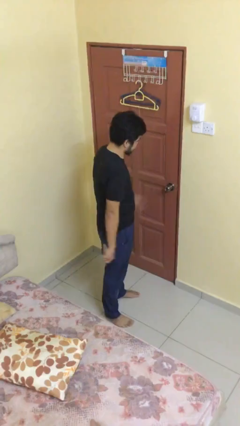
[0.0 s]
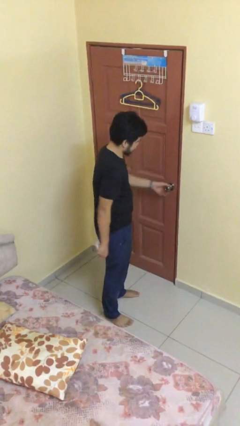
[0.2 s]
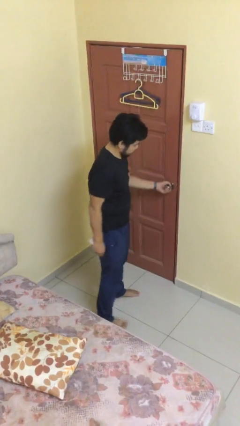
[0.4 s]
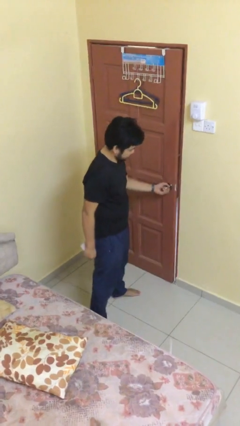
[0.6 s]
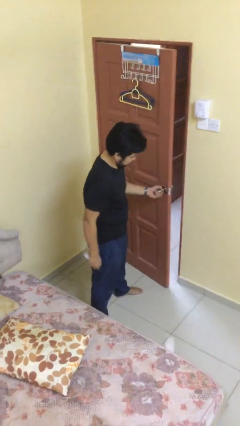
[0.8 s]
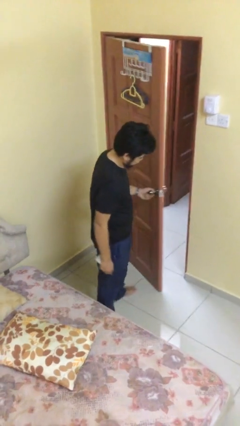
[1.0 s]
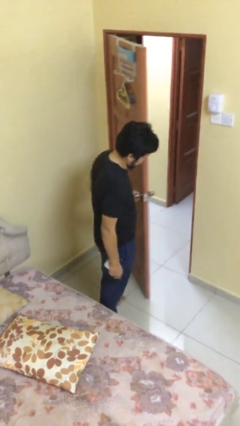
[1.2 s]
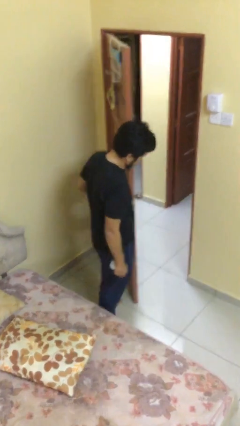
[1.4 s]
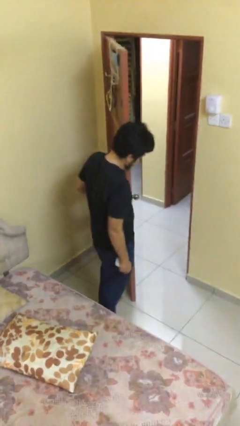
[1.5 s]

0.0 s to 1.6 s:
person opens facility door

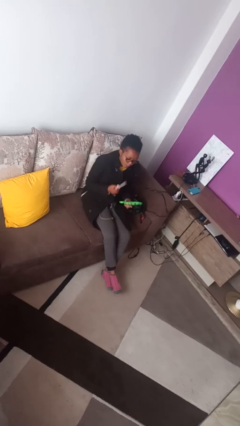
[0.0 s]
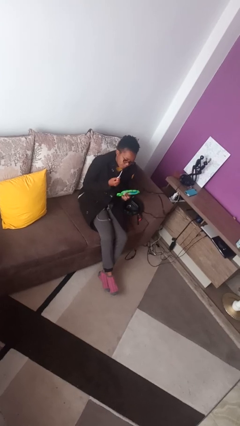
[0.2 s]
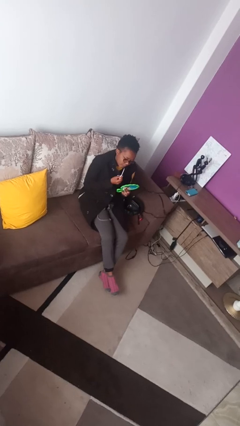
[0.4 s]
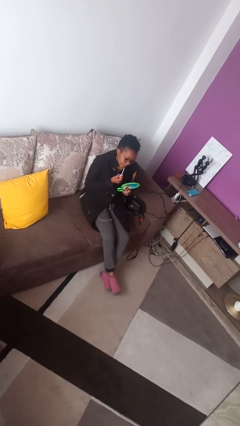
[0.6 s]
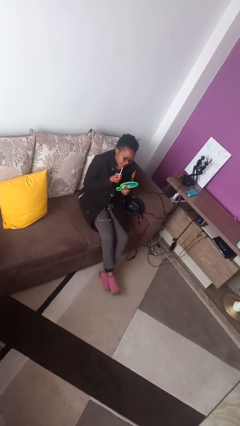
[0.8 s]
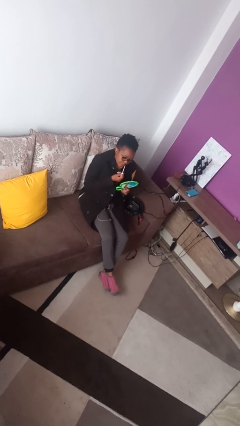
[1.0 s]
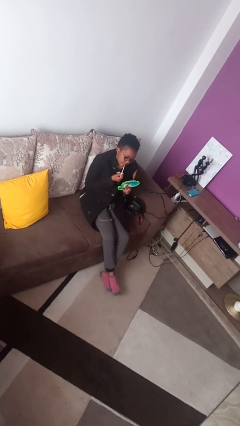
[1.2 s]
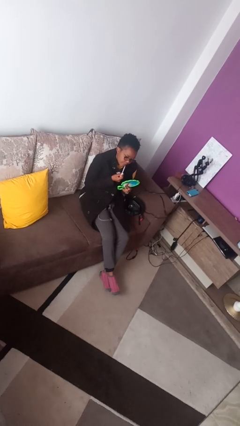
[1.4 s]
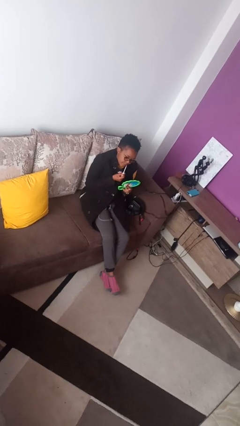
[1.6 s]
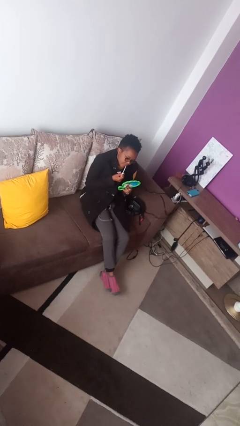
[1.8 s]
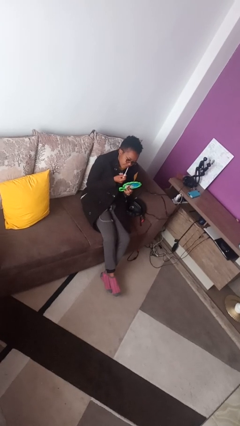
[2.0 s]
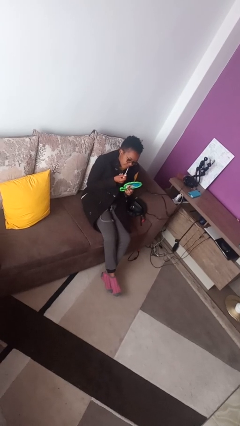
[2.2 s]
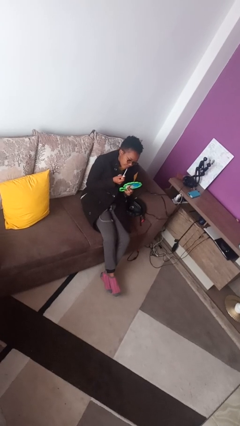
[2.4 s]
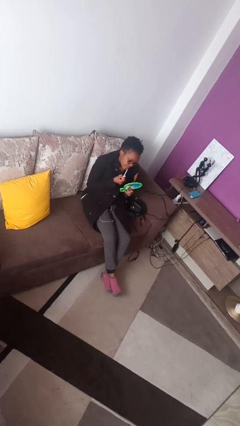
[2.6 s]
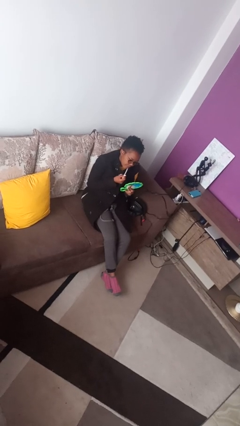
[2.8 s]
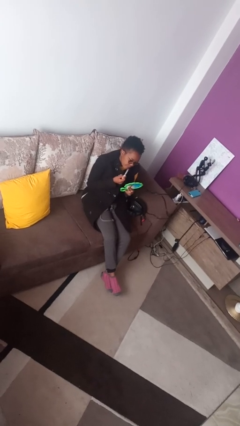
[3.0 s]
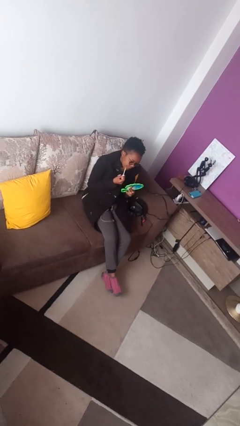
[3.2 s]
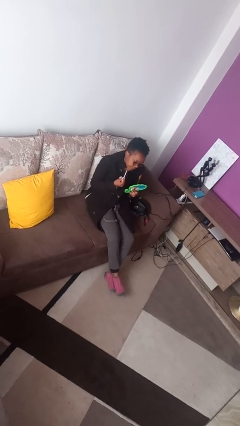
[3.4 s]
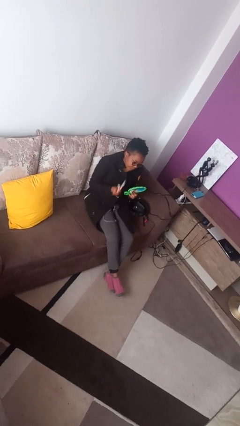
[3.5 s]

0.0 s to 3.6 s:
person applies lip makeup

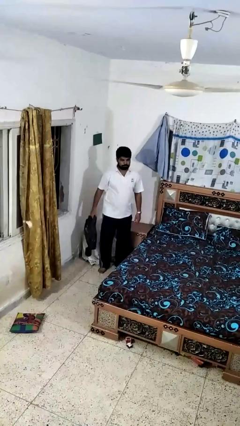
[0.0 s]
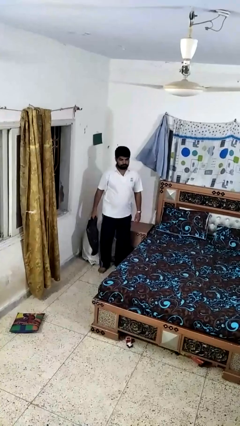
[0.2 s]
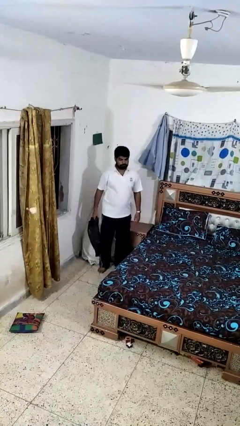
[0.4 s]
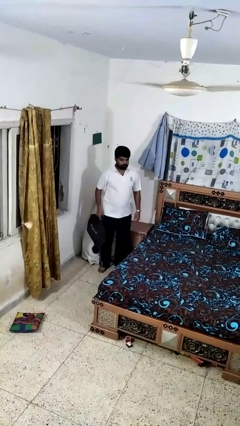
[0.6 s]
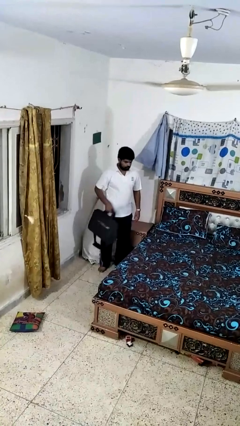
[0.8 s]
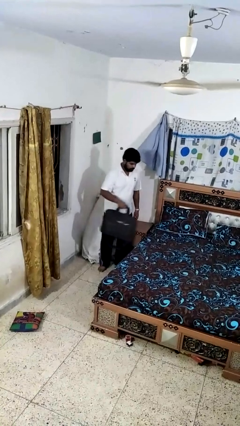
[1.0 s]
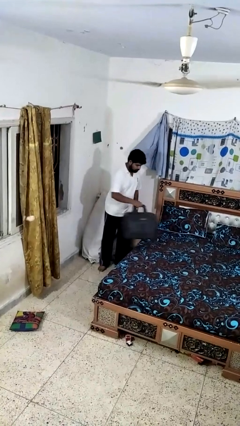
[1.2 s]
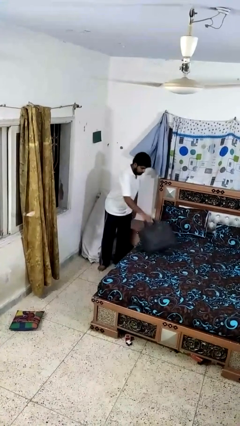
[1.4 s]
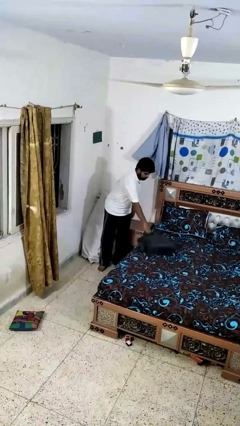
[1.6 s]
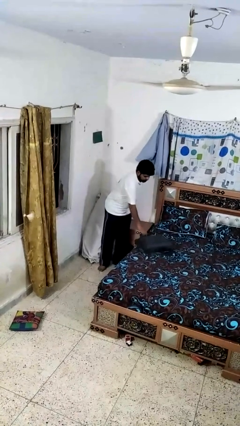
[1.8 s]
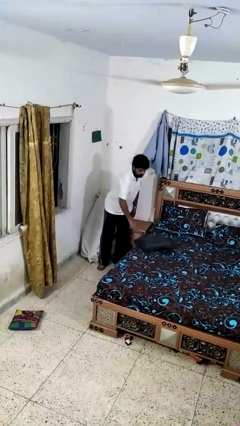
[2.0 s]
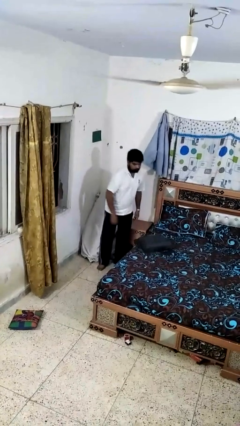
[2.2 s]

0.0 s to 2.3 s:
person puts down object on bed

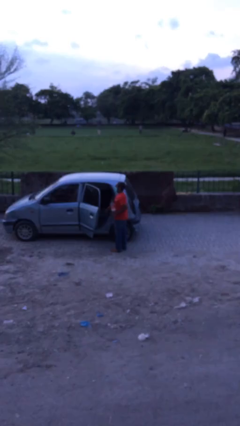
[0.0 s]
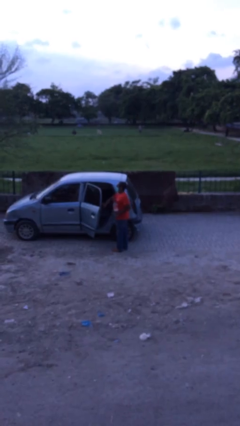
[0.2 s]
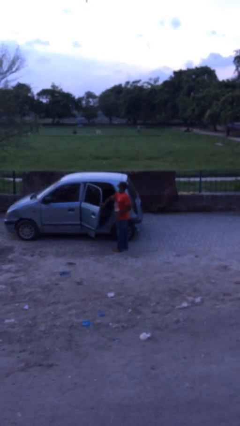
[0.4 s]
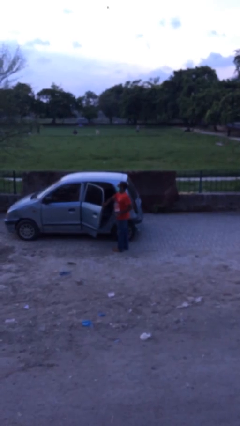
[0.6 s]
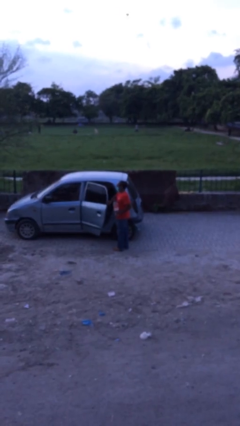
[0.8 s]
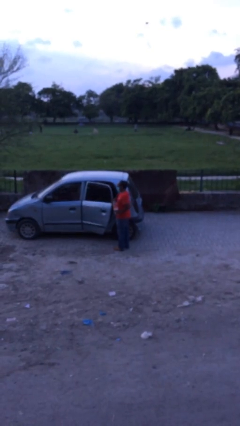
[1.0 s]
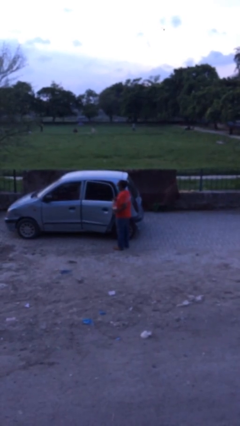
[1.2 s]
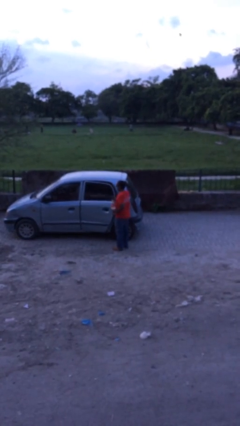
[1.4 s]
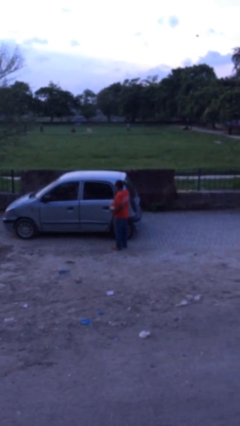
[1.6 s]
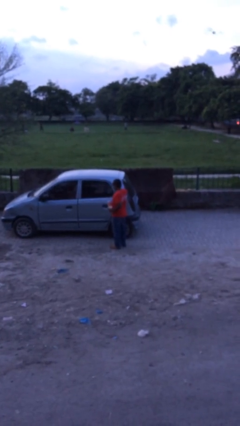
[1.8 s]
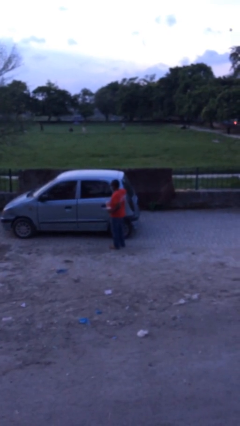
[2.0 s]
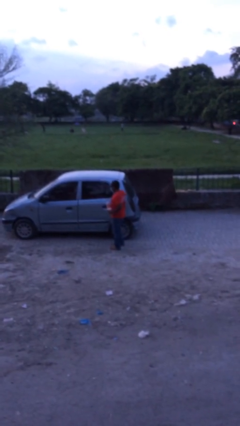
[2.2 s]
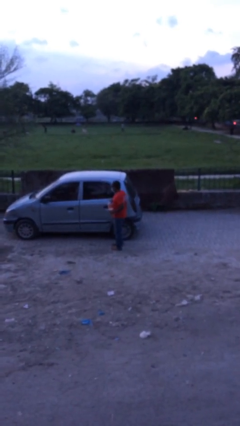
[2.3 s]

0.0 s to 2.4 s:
person closes car door

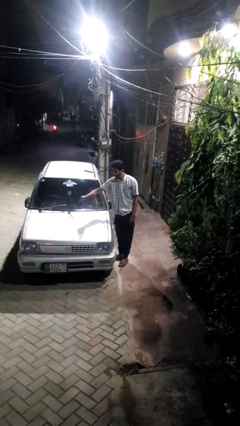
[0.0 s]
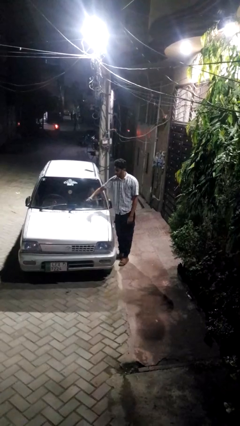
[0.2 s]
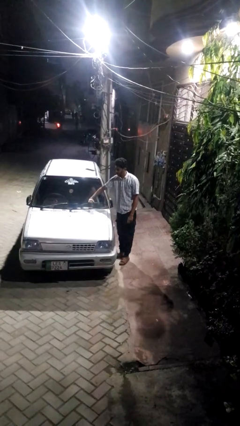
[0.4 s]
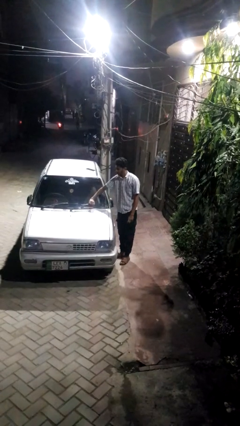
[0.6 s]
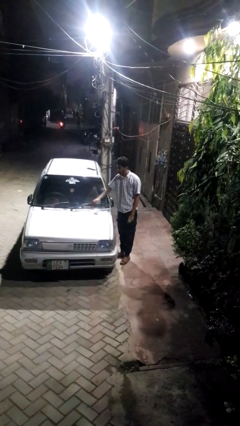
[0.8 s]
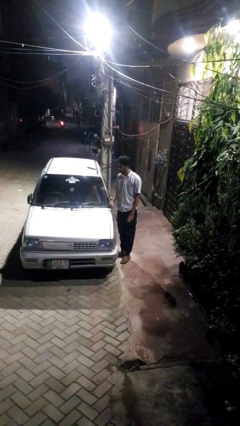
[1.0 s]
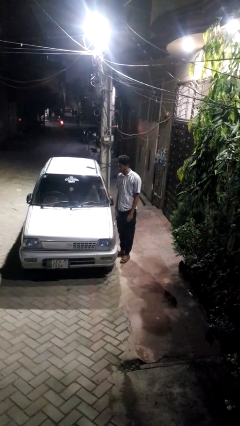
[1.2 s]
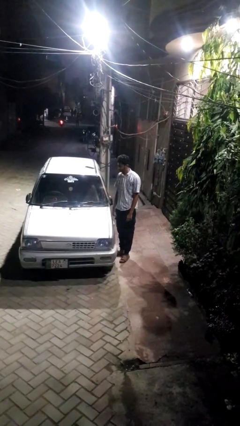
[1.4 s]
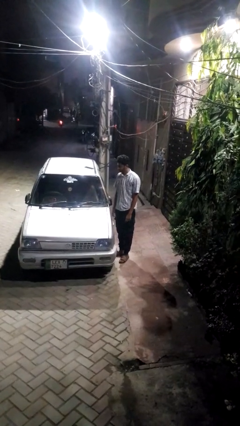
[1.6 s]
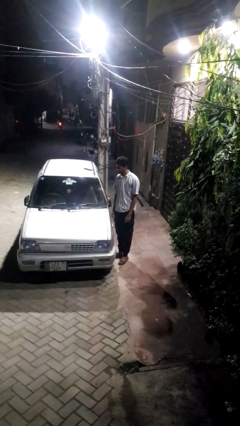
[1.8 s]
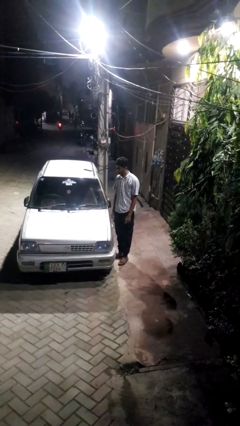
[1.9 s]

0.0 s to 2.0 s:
person flips down car wipers

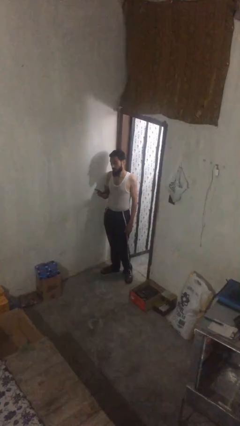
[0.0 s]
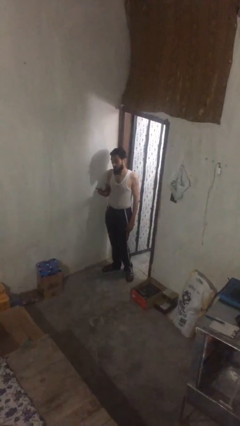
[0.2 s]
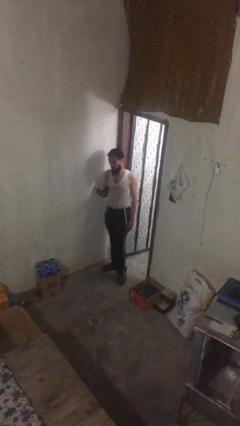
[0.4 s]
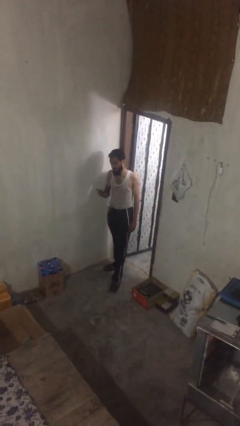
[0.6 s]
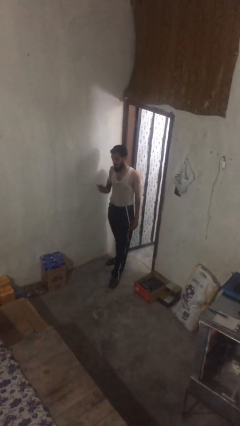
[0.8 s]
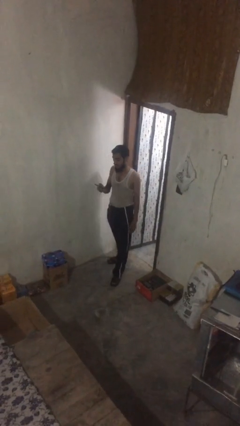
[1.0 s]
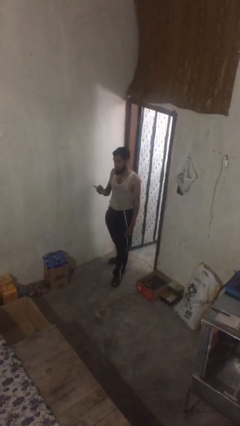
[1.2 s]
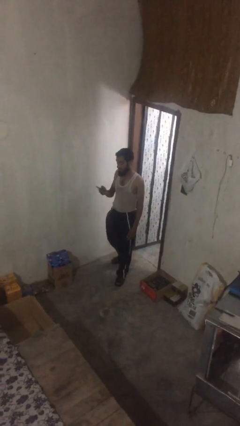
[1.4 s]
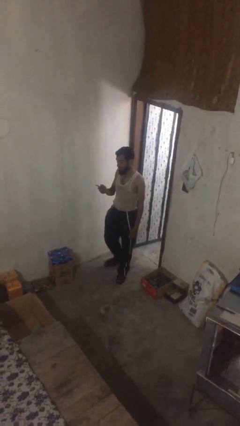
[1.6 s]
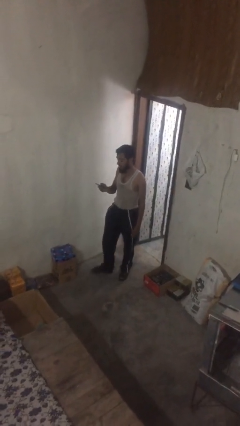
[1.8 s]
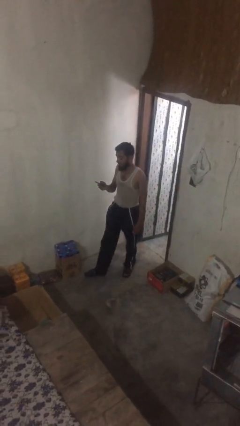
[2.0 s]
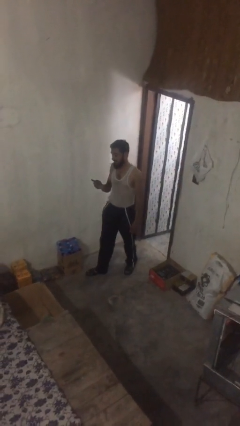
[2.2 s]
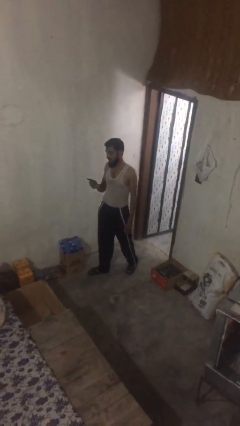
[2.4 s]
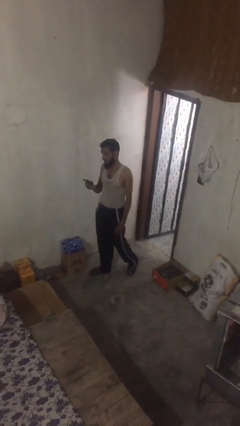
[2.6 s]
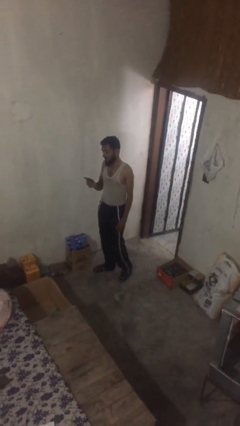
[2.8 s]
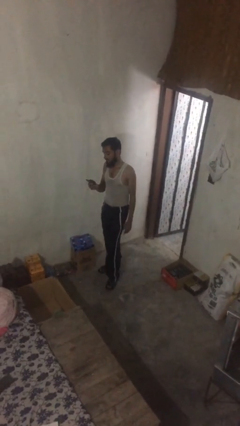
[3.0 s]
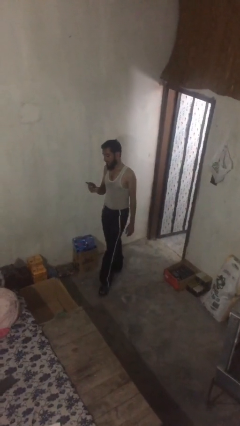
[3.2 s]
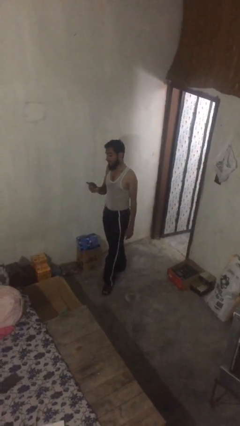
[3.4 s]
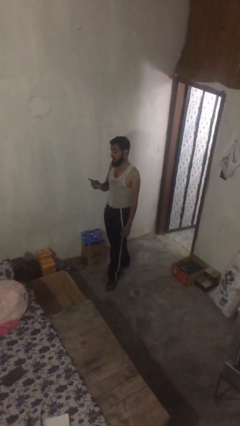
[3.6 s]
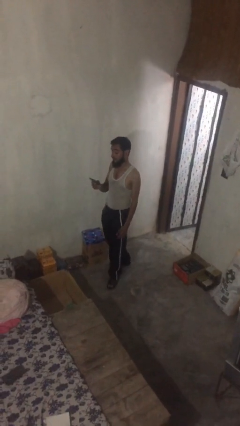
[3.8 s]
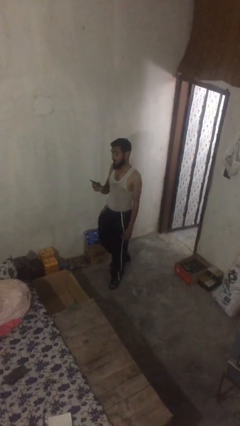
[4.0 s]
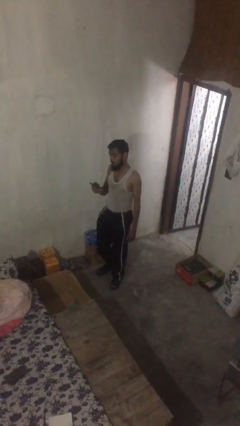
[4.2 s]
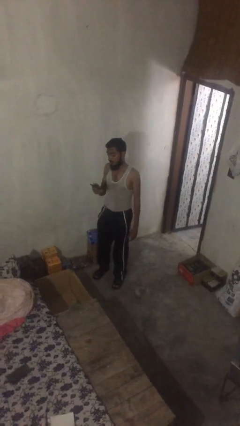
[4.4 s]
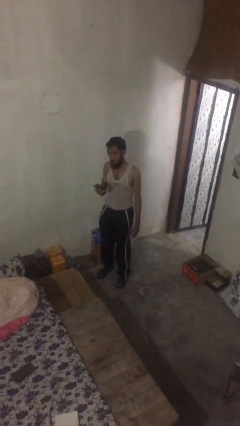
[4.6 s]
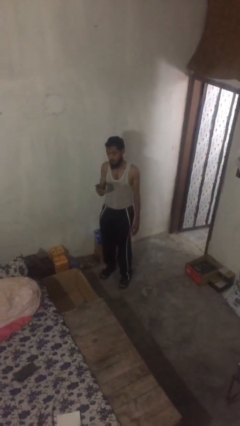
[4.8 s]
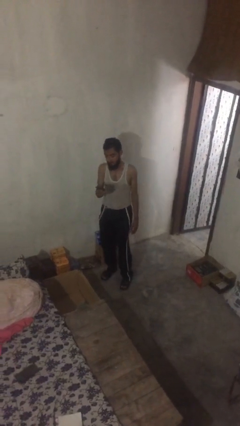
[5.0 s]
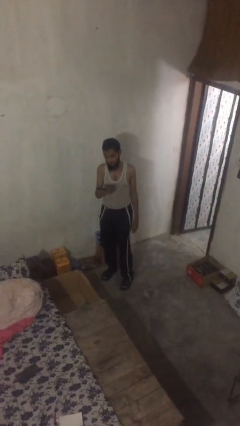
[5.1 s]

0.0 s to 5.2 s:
person texts on phone

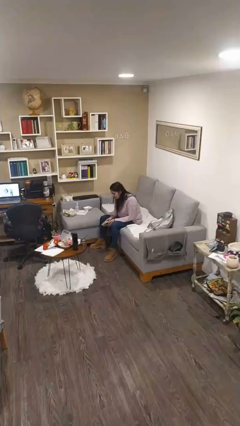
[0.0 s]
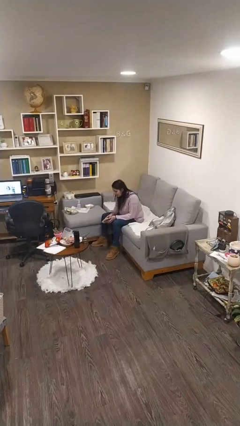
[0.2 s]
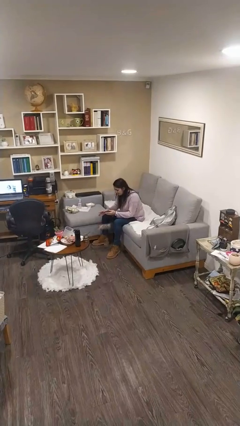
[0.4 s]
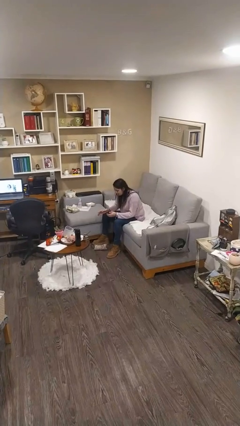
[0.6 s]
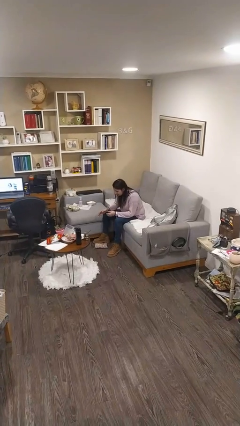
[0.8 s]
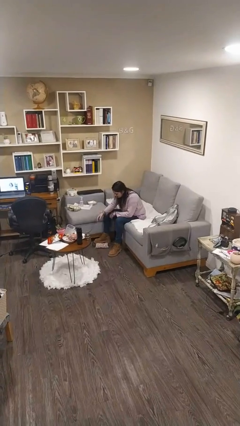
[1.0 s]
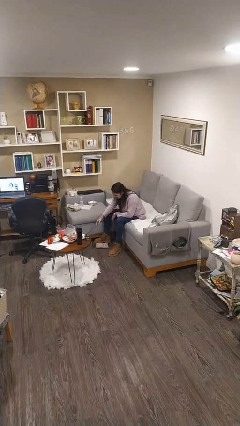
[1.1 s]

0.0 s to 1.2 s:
person drops object
